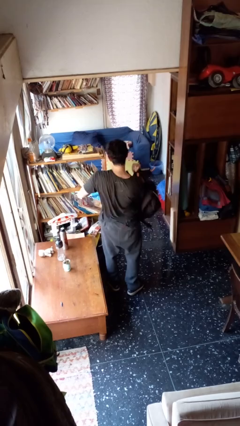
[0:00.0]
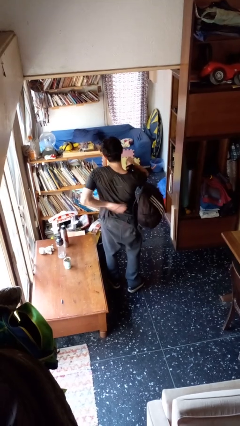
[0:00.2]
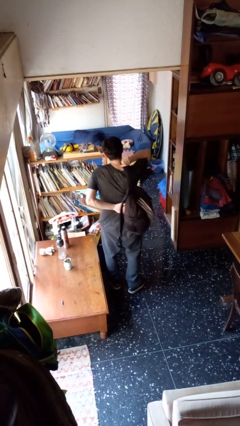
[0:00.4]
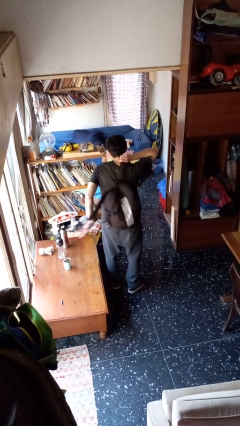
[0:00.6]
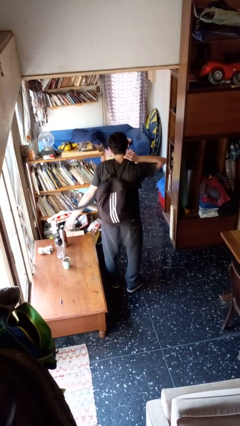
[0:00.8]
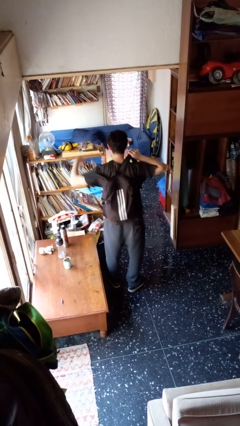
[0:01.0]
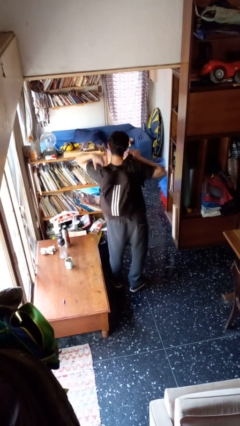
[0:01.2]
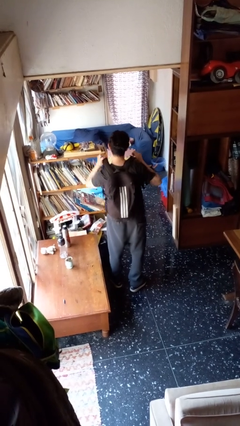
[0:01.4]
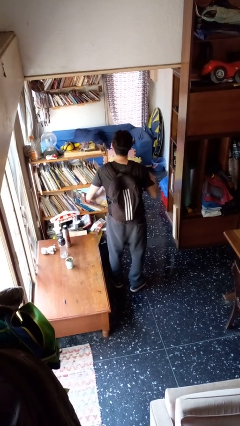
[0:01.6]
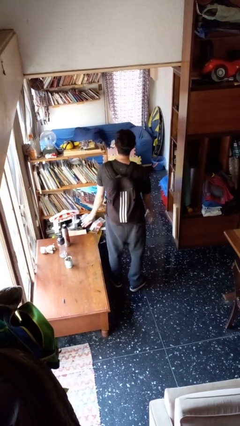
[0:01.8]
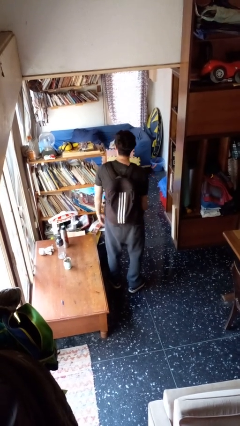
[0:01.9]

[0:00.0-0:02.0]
person puts on backpack

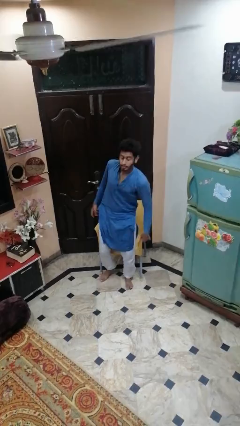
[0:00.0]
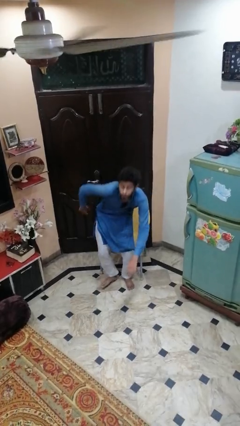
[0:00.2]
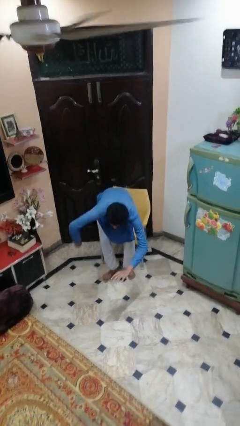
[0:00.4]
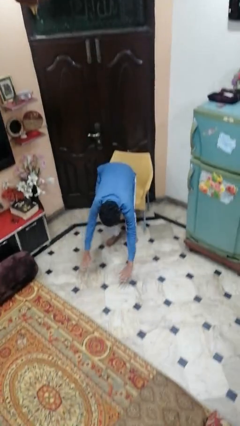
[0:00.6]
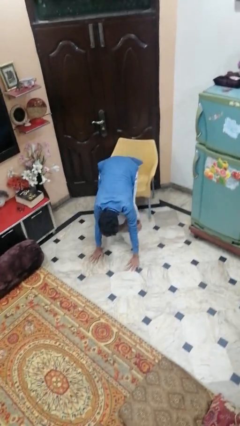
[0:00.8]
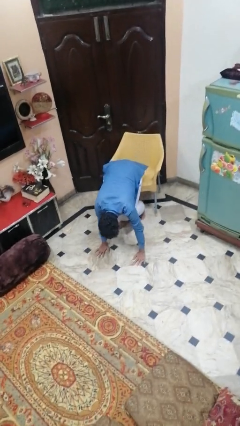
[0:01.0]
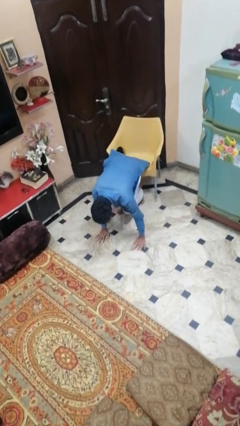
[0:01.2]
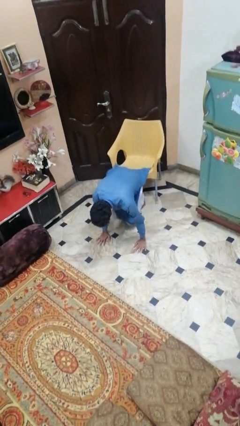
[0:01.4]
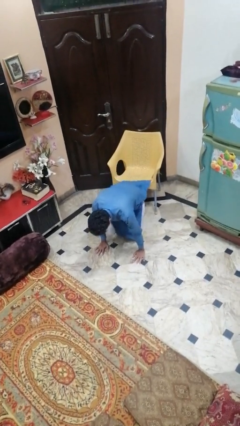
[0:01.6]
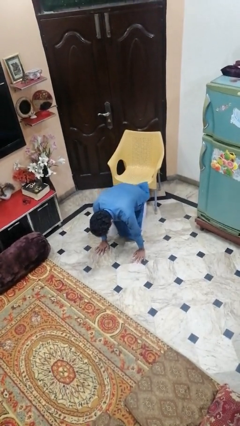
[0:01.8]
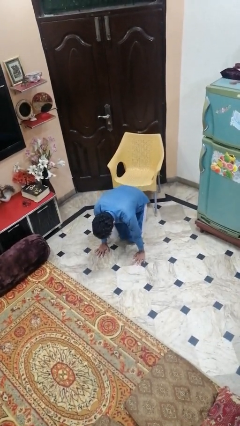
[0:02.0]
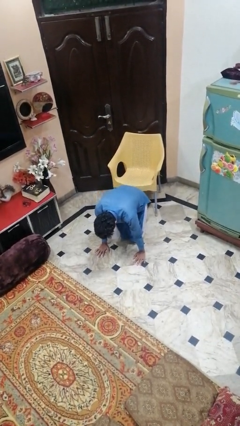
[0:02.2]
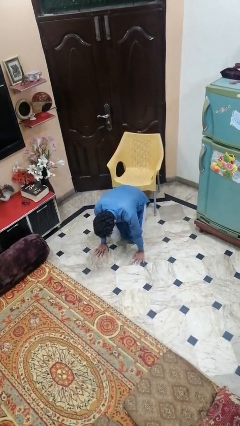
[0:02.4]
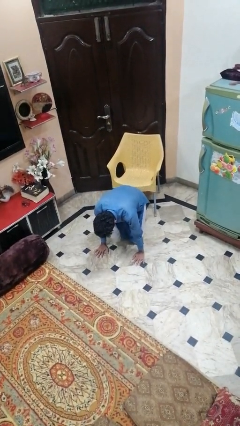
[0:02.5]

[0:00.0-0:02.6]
person falls from chair

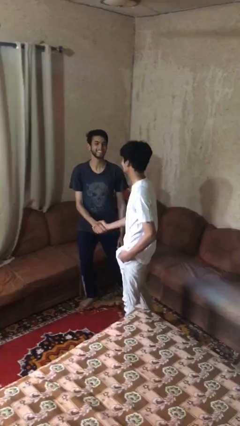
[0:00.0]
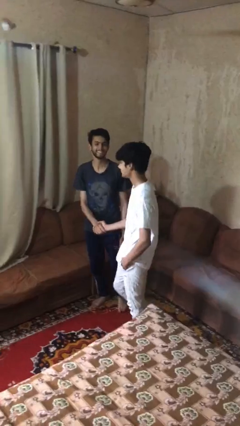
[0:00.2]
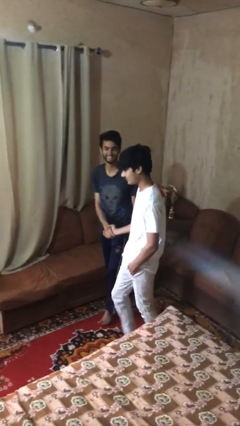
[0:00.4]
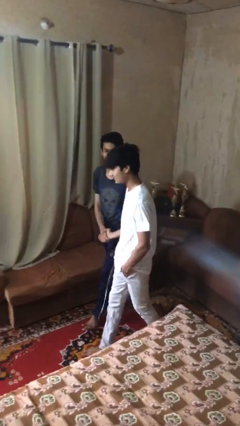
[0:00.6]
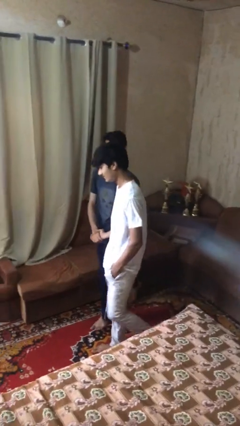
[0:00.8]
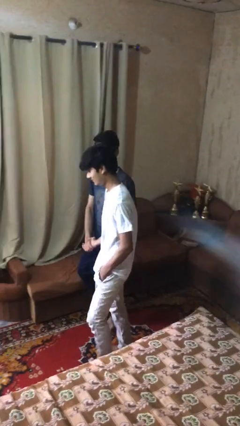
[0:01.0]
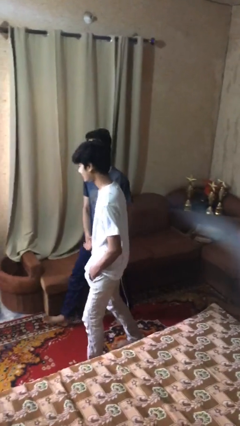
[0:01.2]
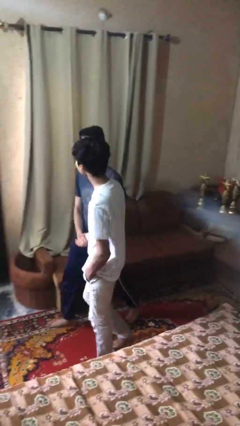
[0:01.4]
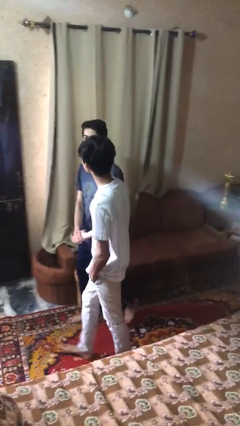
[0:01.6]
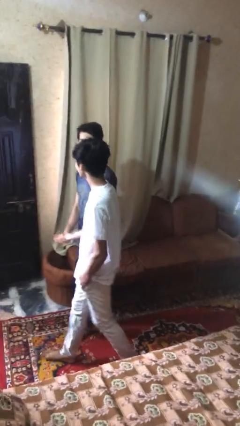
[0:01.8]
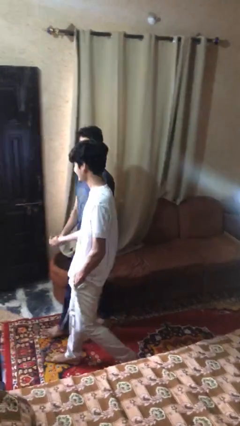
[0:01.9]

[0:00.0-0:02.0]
person talks to person

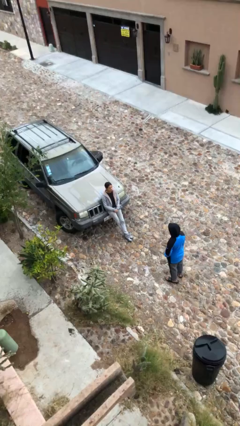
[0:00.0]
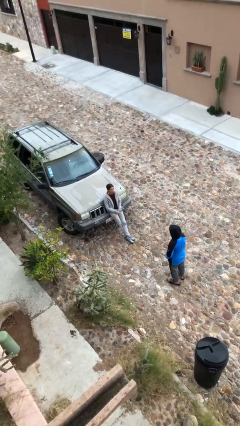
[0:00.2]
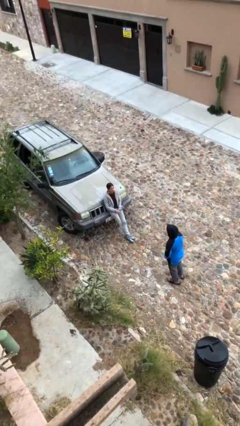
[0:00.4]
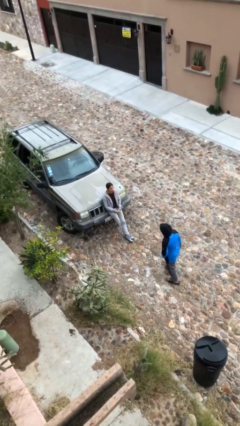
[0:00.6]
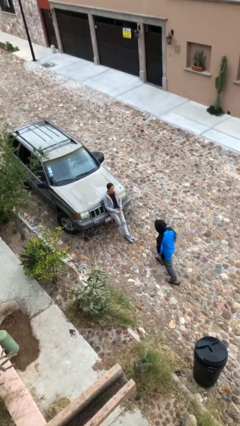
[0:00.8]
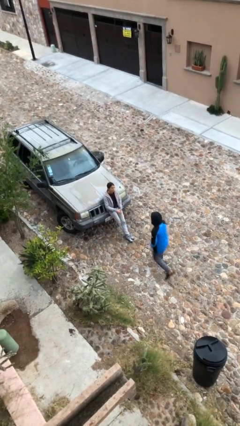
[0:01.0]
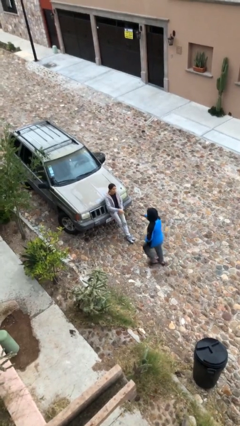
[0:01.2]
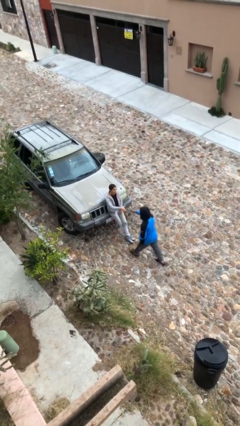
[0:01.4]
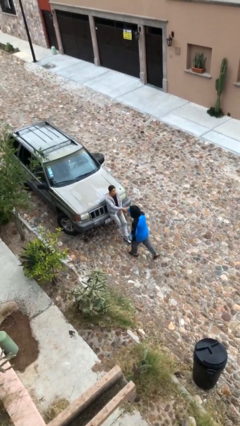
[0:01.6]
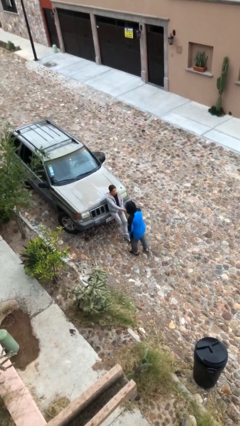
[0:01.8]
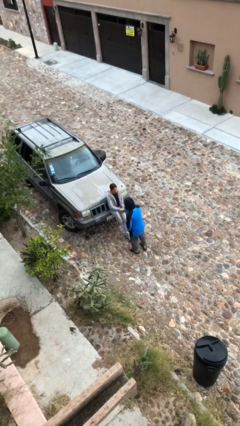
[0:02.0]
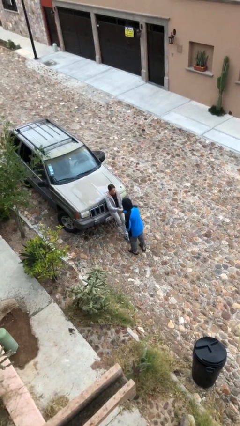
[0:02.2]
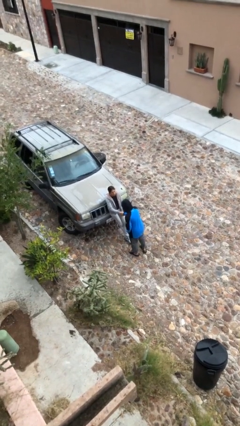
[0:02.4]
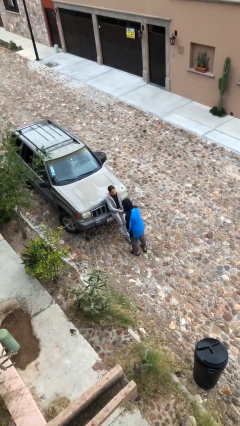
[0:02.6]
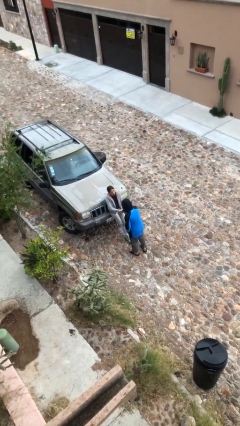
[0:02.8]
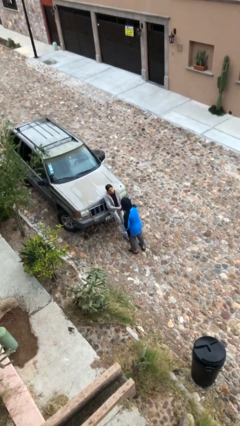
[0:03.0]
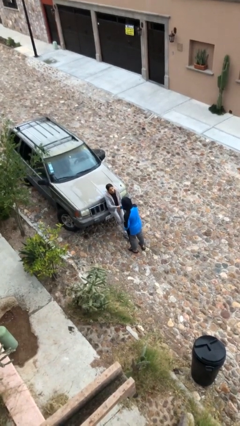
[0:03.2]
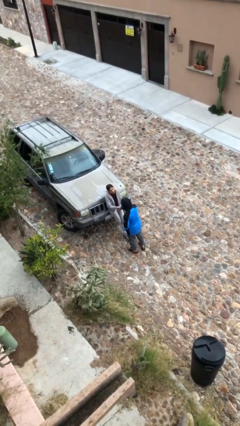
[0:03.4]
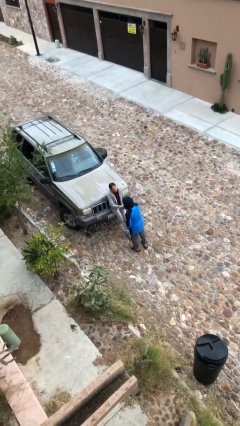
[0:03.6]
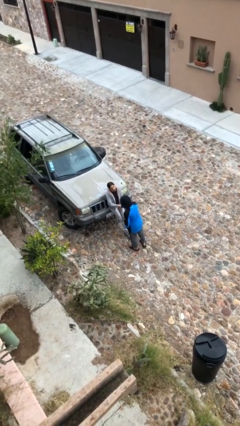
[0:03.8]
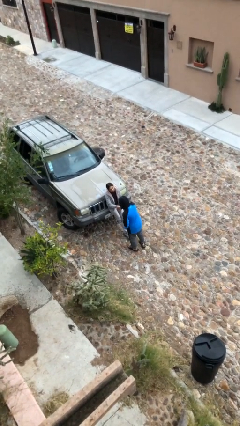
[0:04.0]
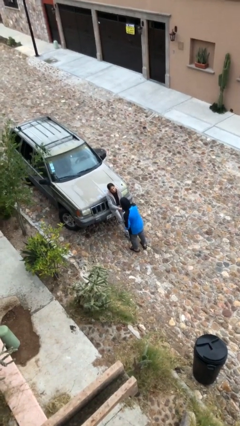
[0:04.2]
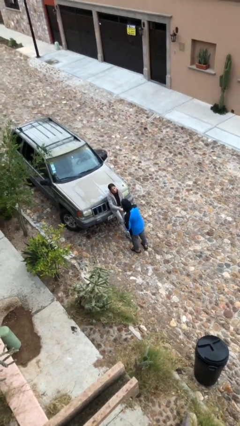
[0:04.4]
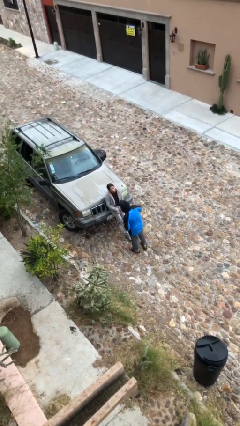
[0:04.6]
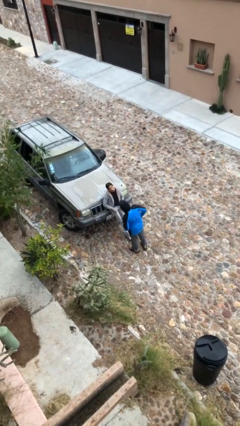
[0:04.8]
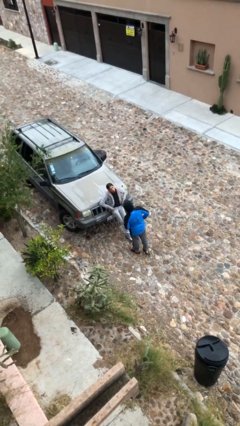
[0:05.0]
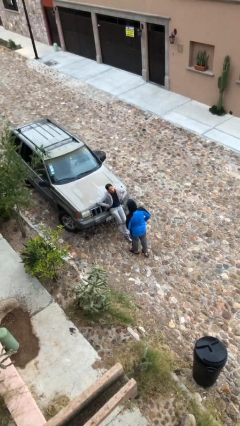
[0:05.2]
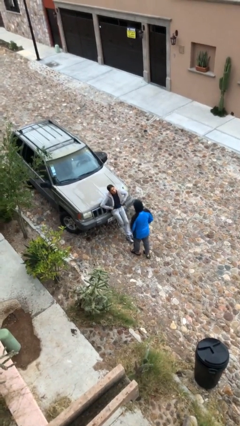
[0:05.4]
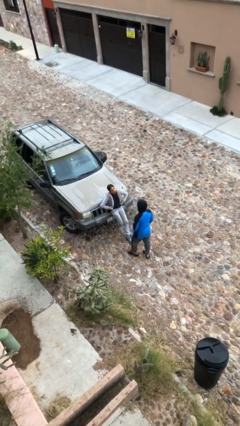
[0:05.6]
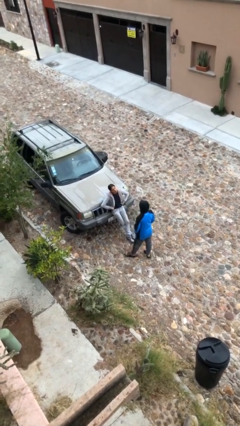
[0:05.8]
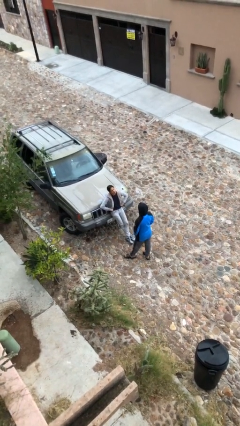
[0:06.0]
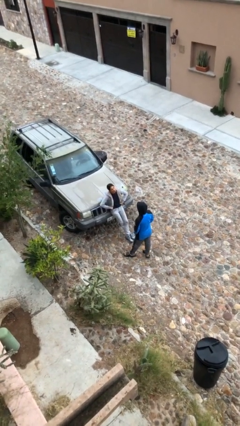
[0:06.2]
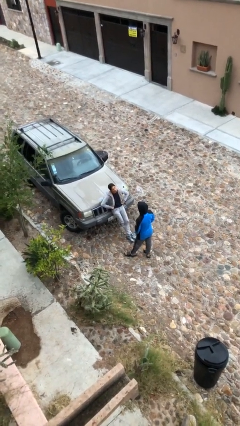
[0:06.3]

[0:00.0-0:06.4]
person shakes hand

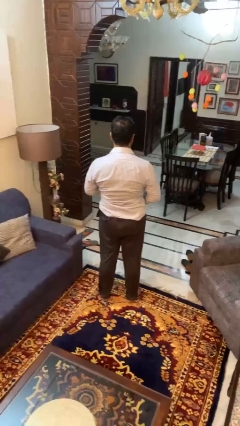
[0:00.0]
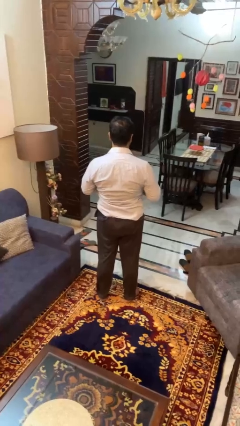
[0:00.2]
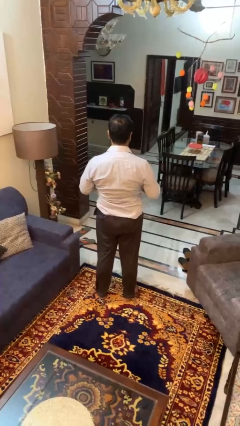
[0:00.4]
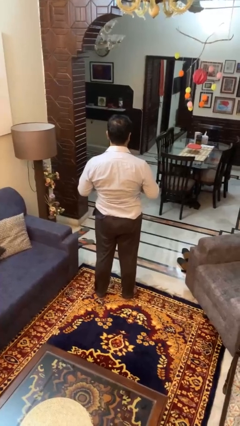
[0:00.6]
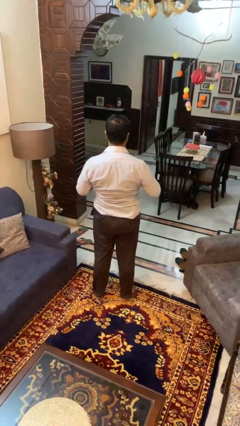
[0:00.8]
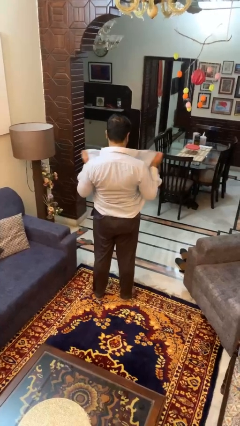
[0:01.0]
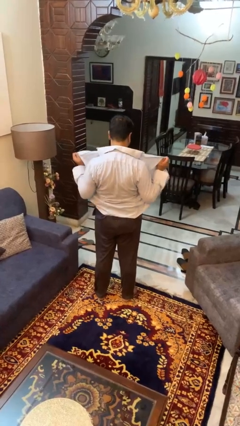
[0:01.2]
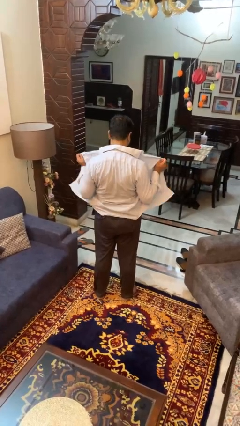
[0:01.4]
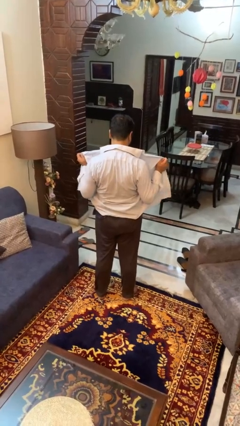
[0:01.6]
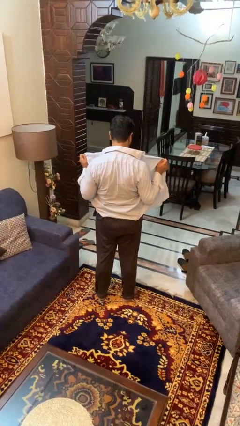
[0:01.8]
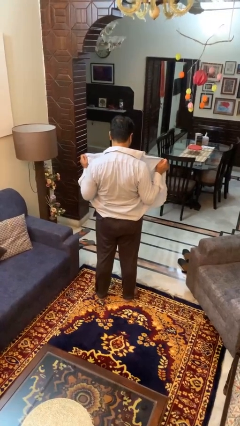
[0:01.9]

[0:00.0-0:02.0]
person unbuttons shirt

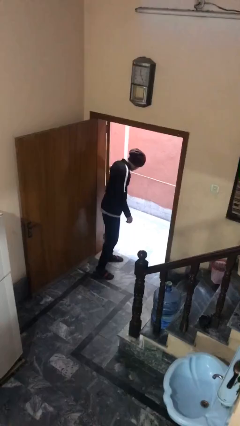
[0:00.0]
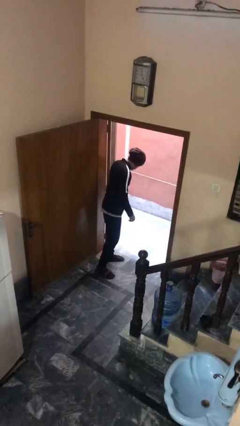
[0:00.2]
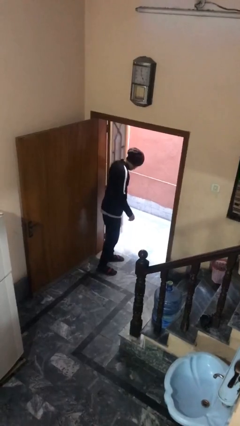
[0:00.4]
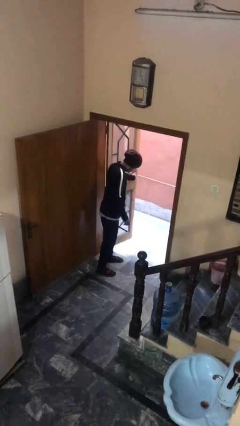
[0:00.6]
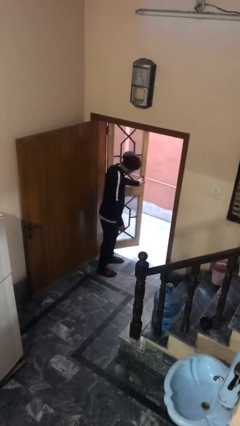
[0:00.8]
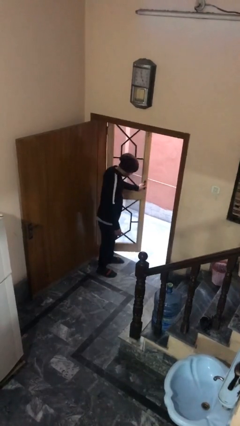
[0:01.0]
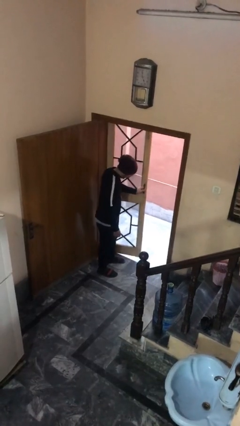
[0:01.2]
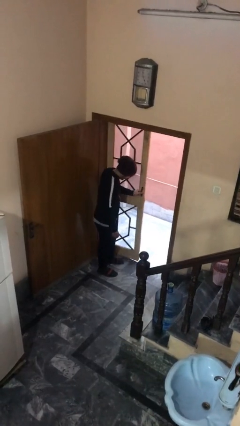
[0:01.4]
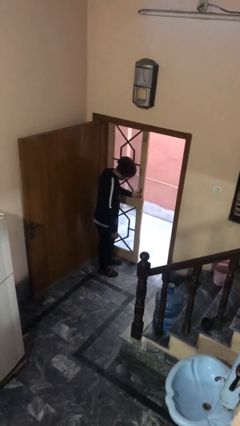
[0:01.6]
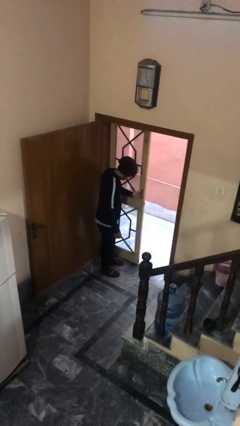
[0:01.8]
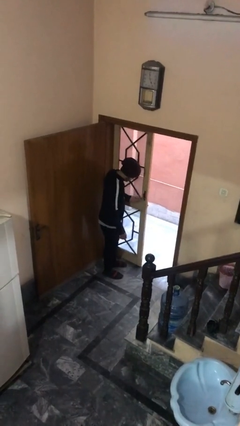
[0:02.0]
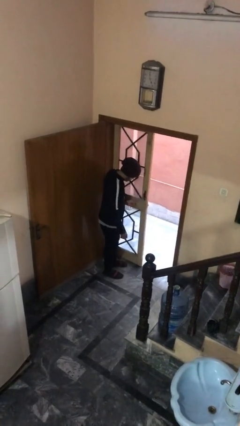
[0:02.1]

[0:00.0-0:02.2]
person closes facility door

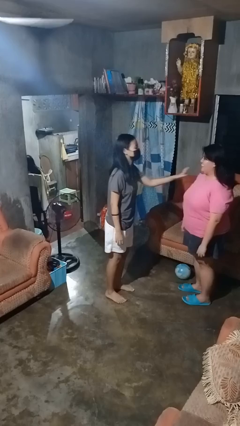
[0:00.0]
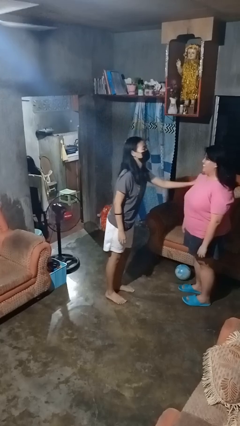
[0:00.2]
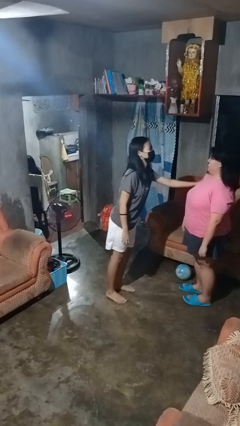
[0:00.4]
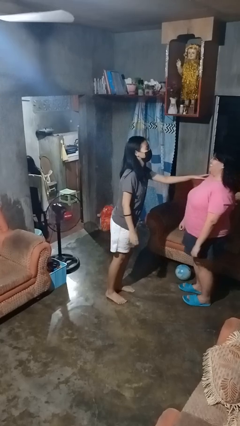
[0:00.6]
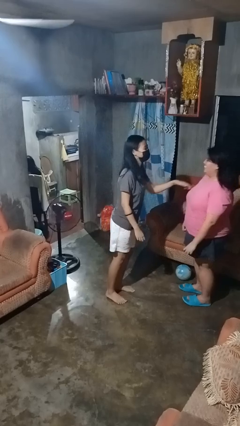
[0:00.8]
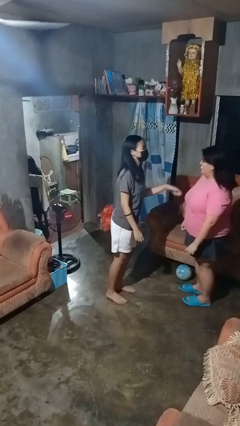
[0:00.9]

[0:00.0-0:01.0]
person shoves person
